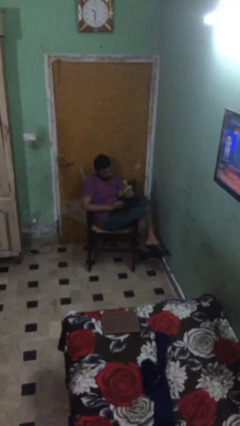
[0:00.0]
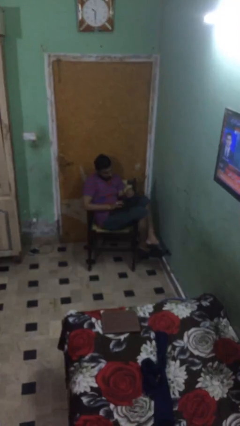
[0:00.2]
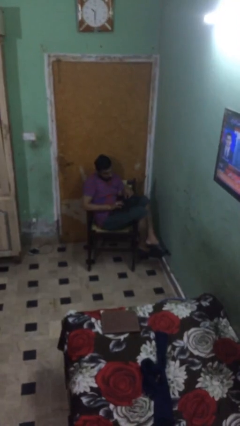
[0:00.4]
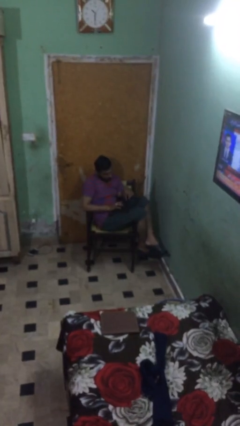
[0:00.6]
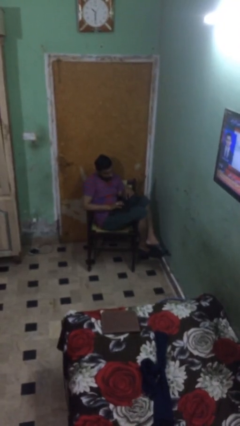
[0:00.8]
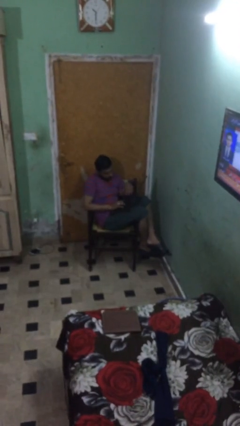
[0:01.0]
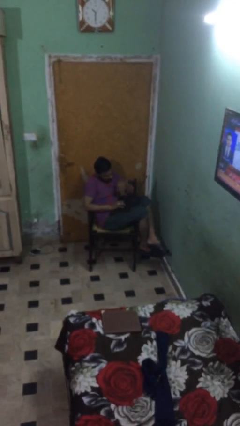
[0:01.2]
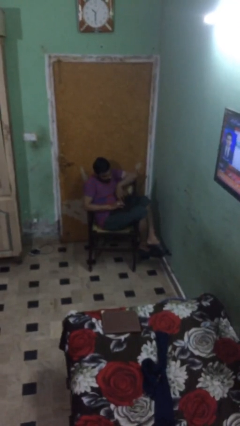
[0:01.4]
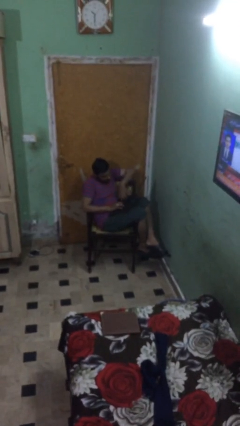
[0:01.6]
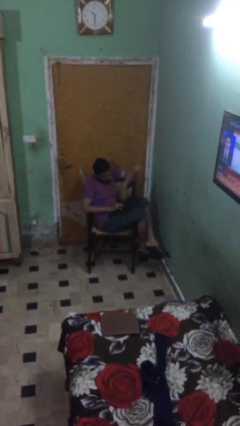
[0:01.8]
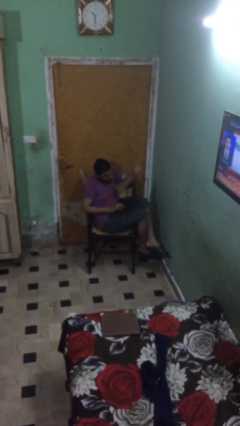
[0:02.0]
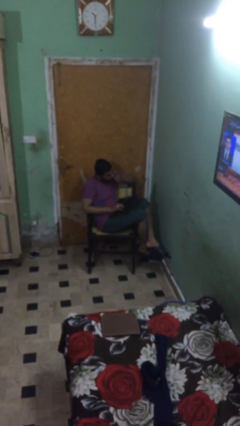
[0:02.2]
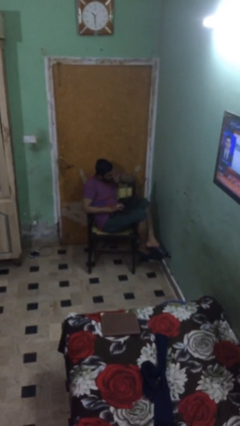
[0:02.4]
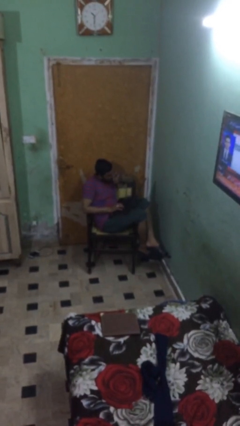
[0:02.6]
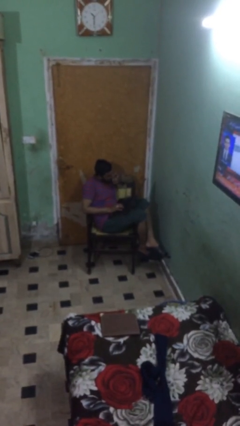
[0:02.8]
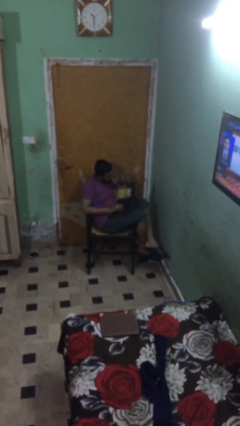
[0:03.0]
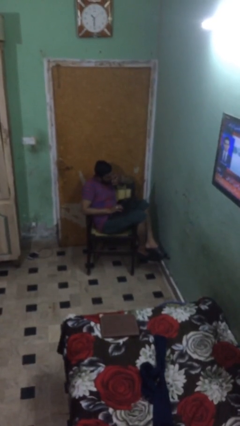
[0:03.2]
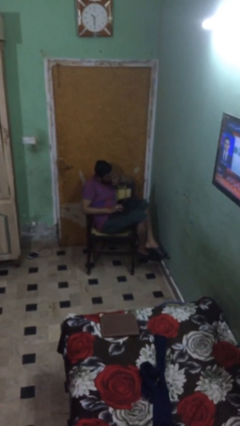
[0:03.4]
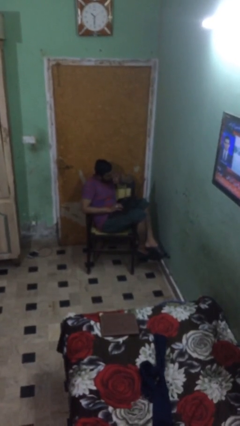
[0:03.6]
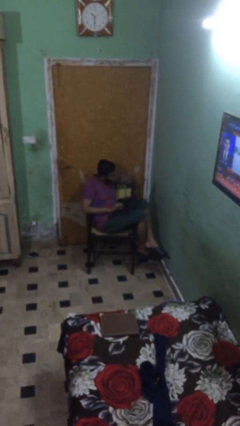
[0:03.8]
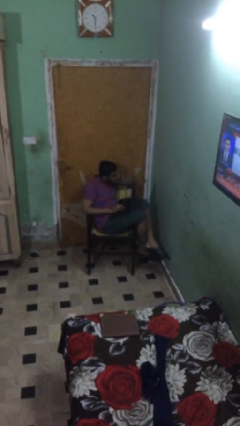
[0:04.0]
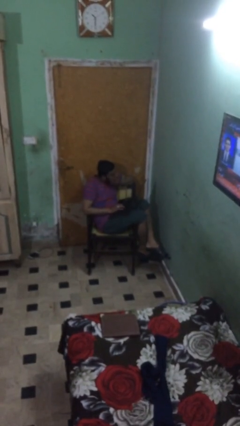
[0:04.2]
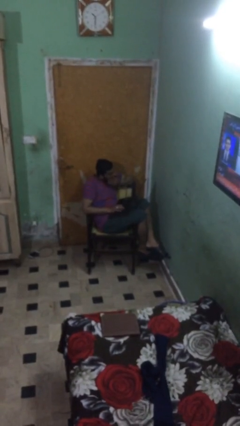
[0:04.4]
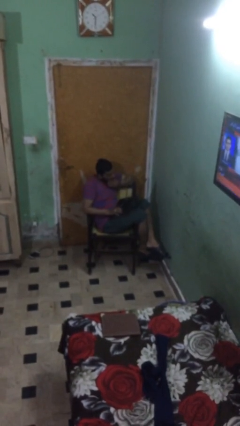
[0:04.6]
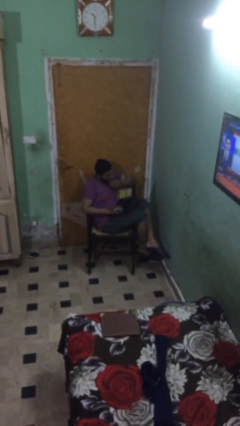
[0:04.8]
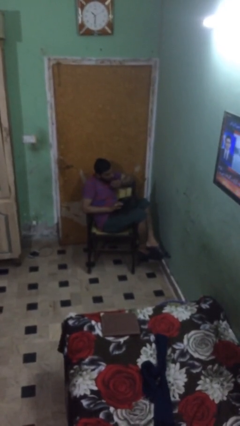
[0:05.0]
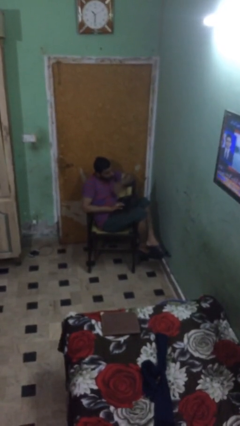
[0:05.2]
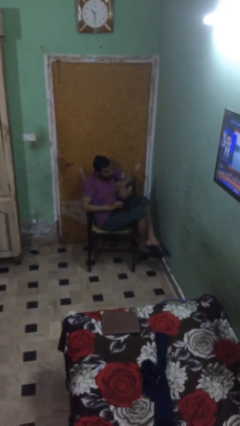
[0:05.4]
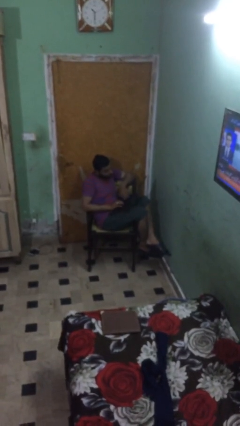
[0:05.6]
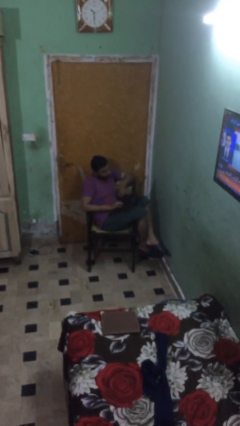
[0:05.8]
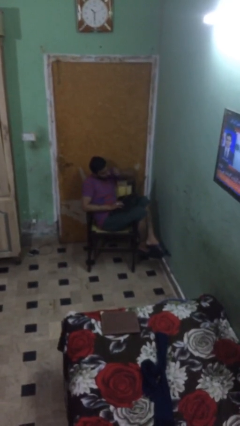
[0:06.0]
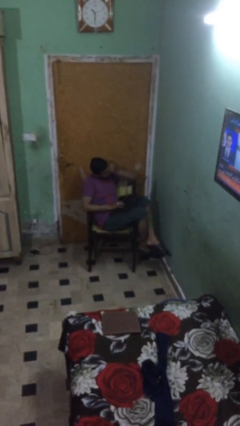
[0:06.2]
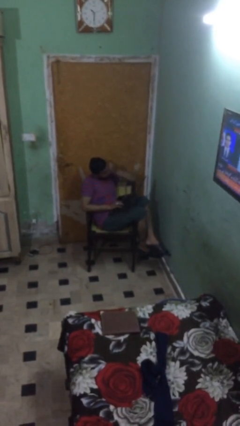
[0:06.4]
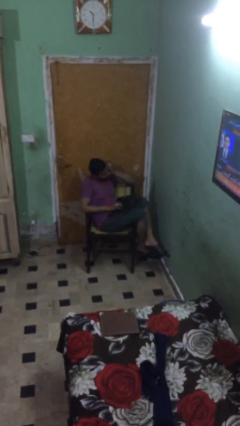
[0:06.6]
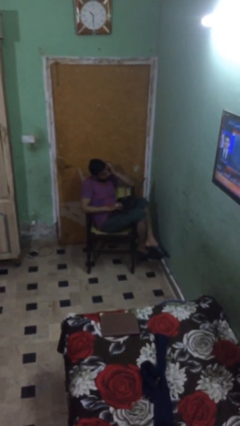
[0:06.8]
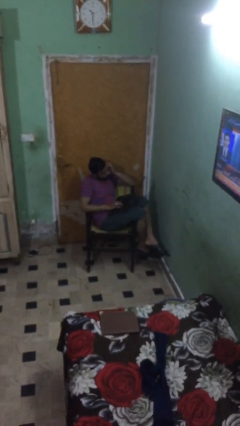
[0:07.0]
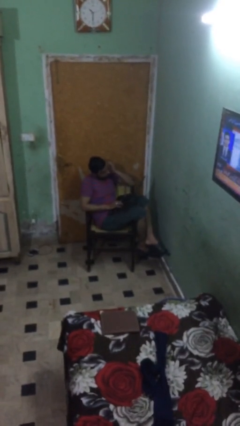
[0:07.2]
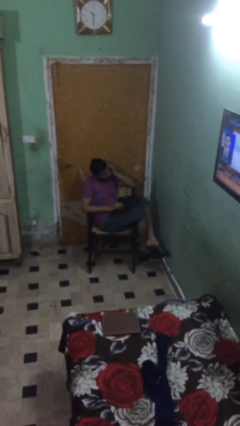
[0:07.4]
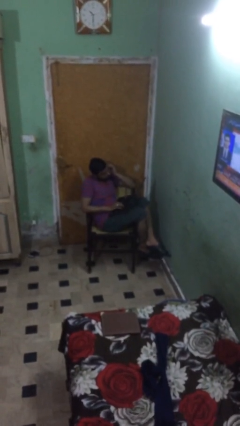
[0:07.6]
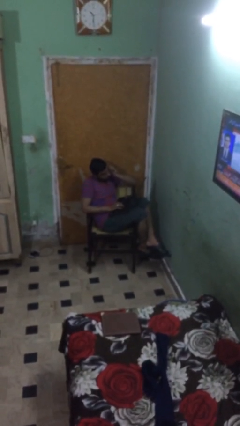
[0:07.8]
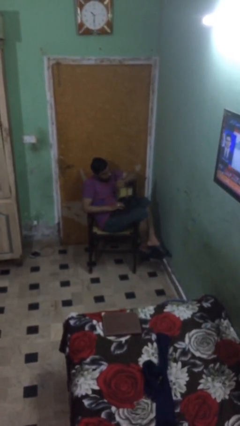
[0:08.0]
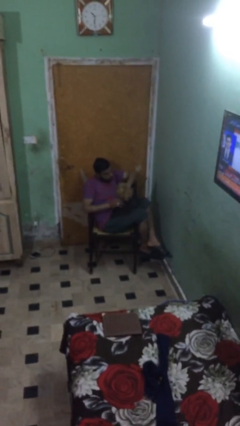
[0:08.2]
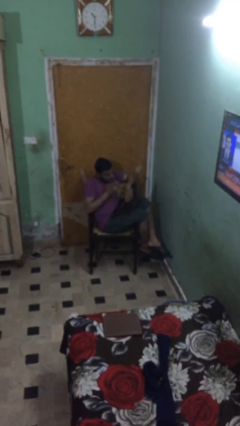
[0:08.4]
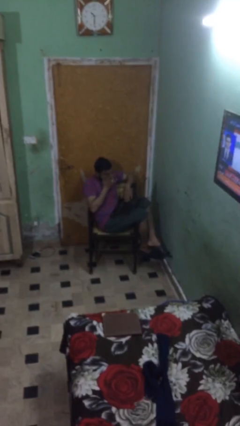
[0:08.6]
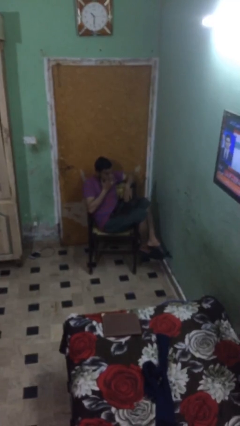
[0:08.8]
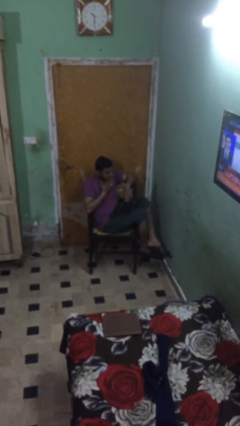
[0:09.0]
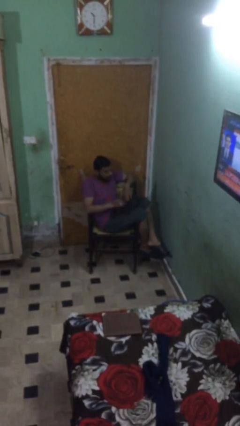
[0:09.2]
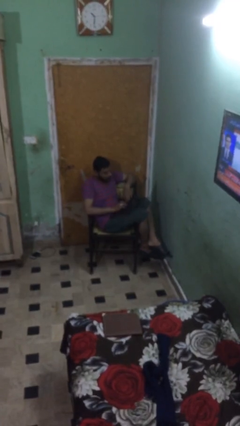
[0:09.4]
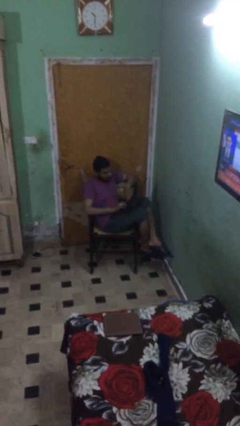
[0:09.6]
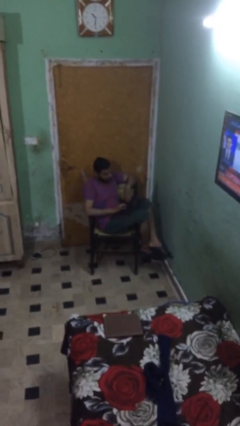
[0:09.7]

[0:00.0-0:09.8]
person interacts with laptop
